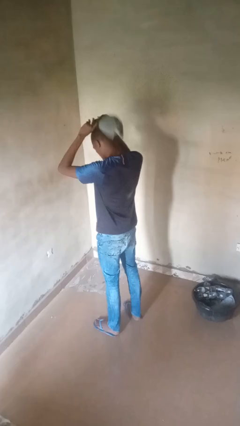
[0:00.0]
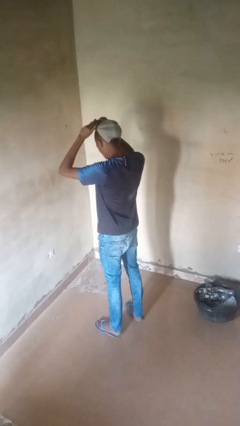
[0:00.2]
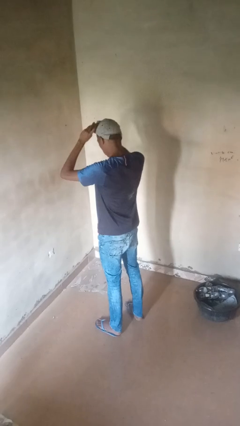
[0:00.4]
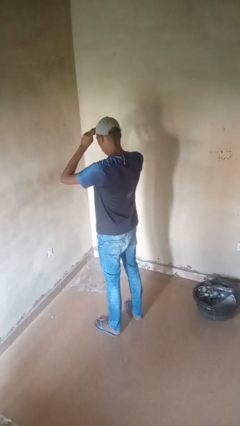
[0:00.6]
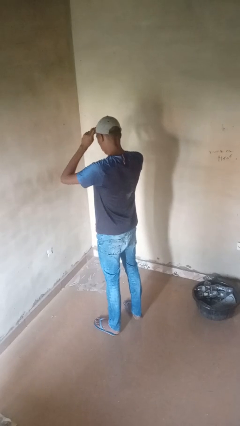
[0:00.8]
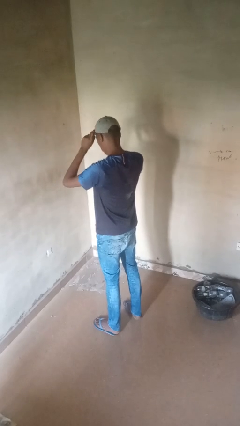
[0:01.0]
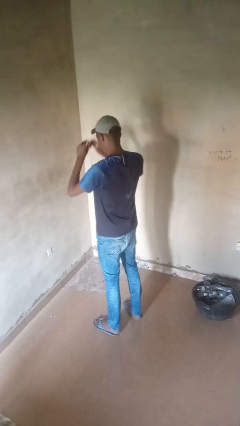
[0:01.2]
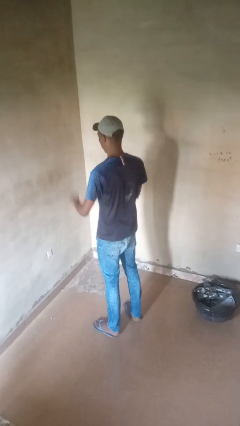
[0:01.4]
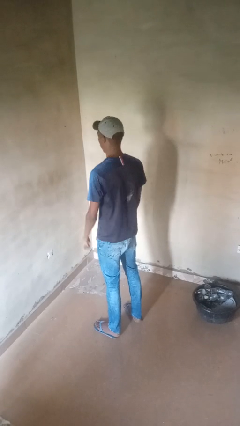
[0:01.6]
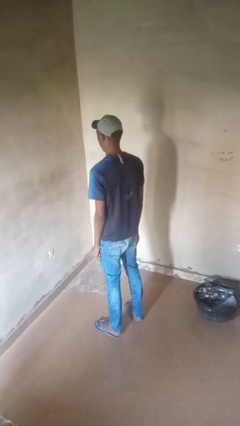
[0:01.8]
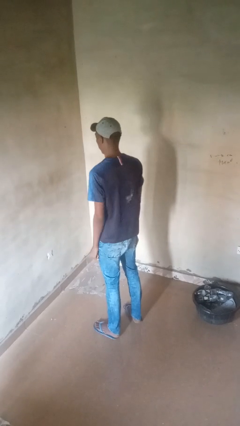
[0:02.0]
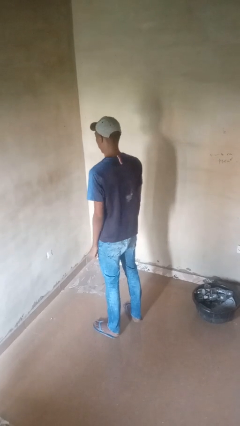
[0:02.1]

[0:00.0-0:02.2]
person puts on hat

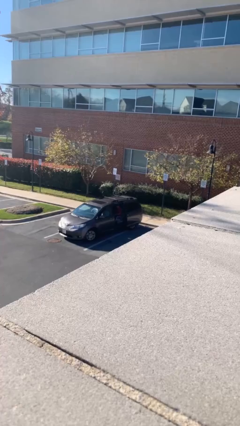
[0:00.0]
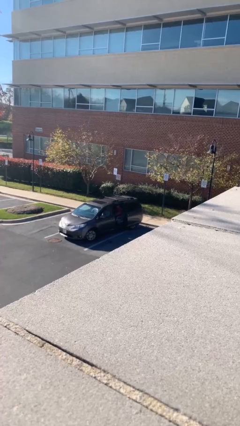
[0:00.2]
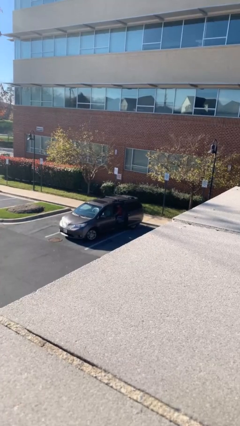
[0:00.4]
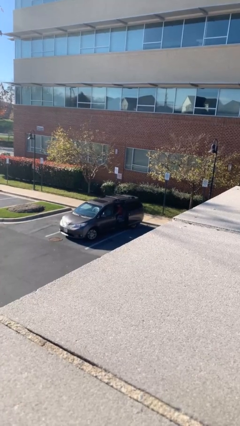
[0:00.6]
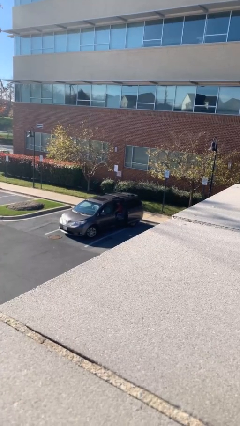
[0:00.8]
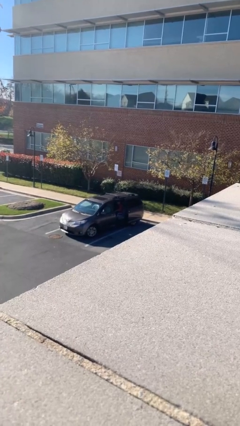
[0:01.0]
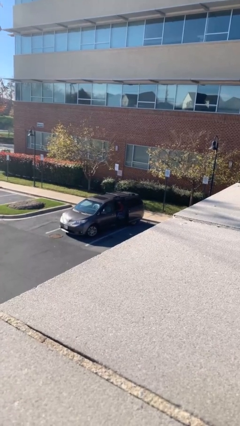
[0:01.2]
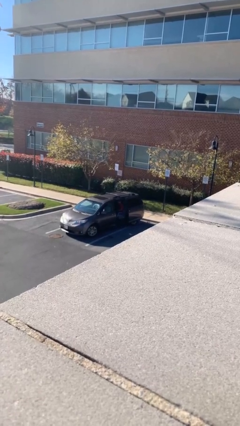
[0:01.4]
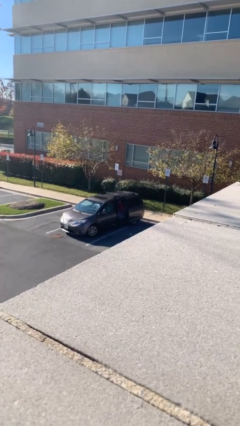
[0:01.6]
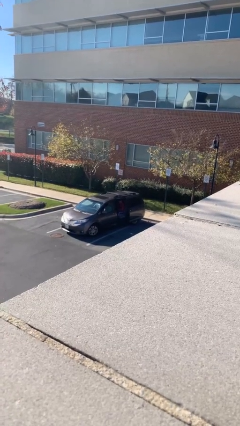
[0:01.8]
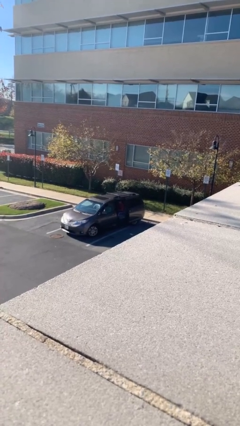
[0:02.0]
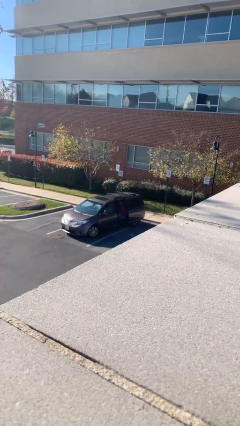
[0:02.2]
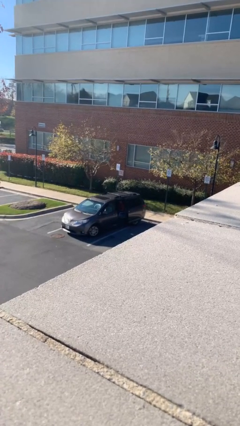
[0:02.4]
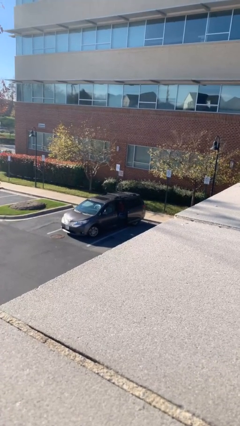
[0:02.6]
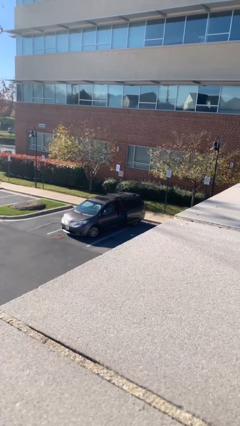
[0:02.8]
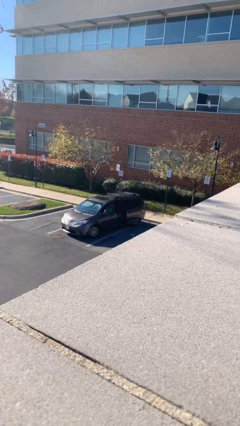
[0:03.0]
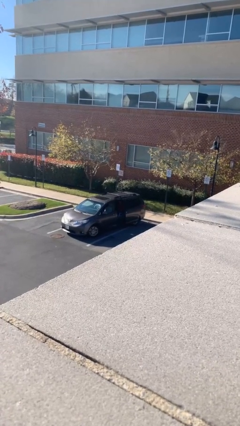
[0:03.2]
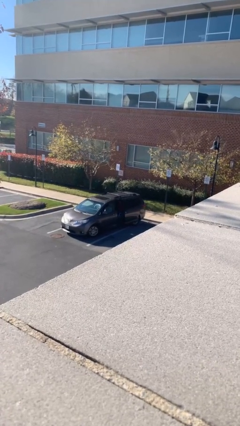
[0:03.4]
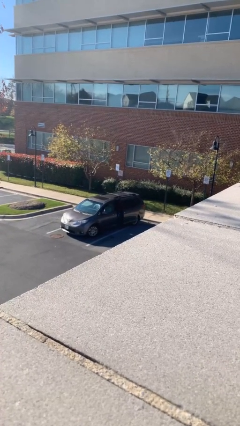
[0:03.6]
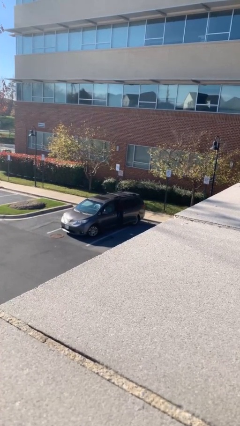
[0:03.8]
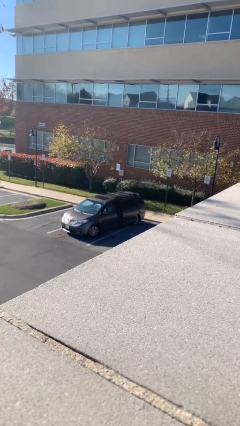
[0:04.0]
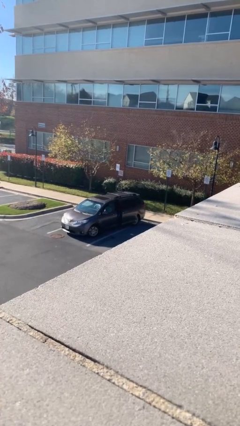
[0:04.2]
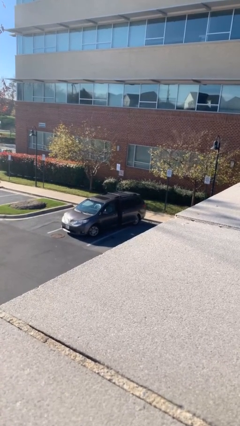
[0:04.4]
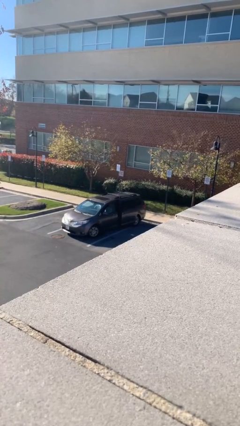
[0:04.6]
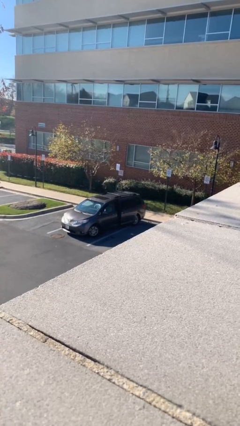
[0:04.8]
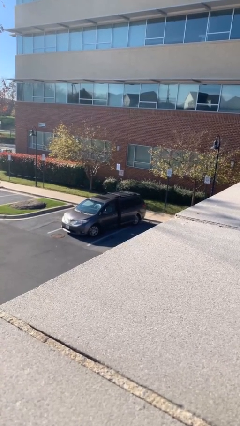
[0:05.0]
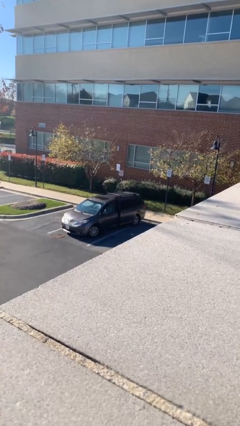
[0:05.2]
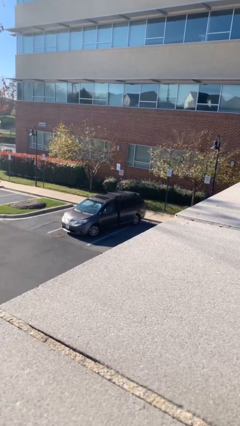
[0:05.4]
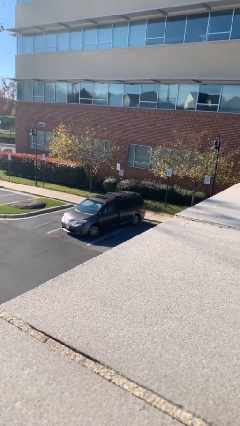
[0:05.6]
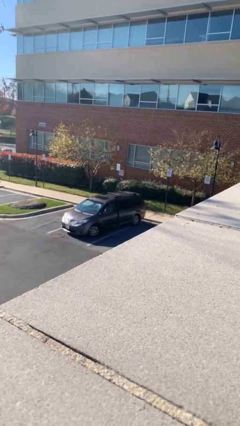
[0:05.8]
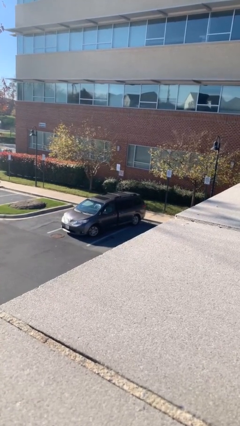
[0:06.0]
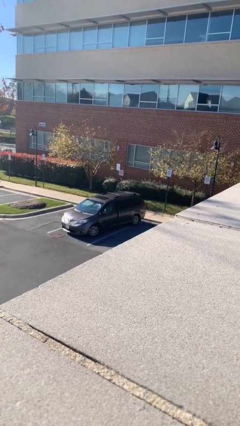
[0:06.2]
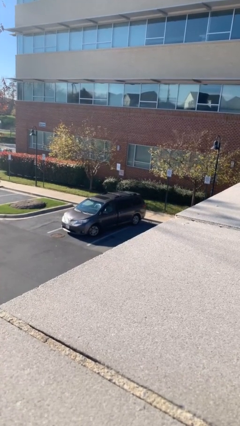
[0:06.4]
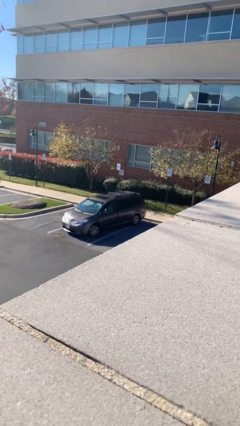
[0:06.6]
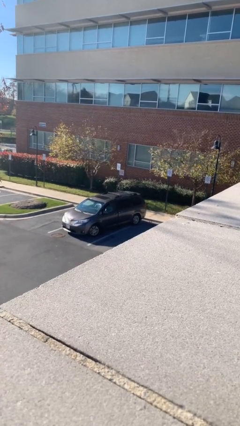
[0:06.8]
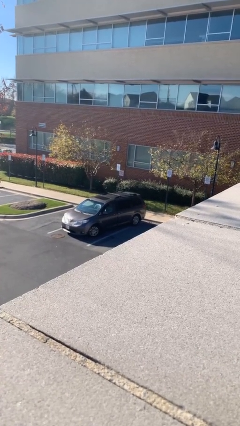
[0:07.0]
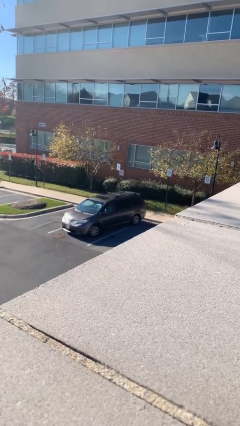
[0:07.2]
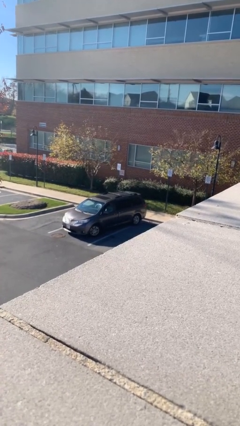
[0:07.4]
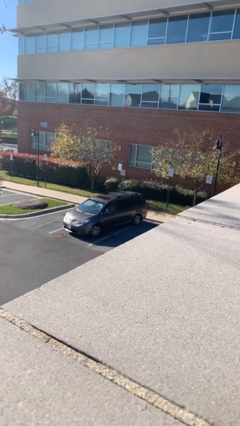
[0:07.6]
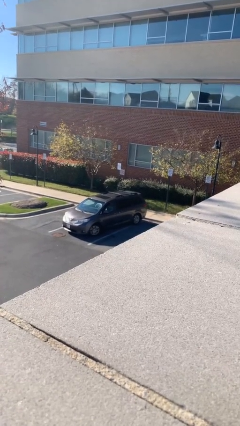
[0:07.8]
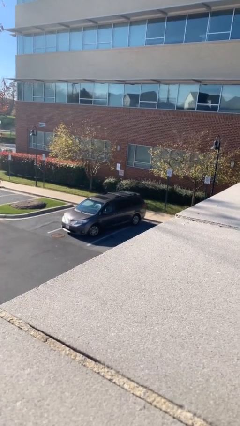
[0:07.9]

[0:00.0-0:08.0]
person closes car door

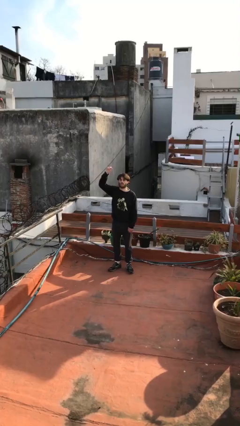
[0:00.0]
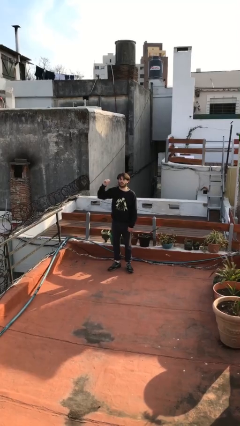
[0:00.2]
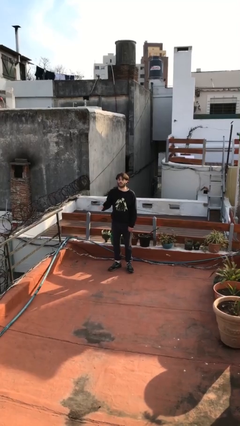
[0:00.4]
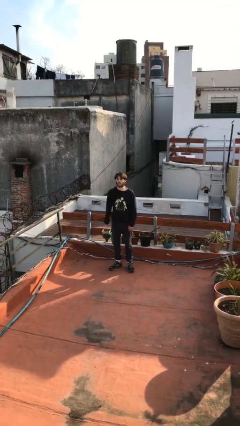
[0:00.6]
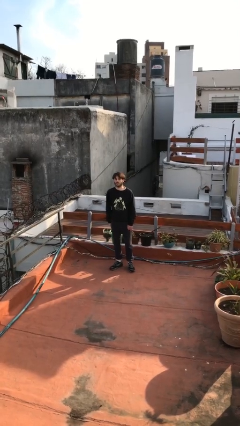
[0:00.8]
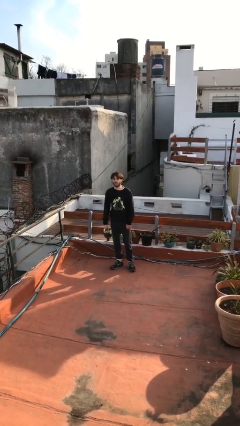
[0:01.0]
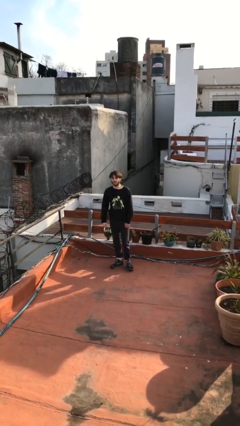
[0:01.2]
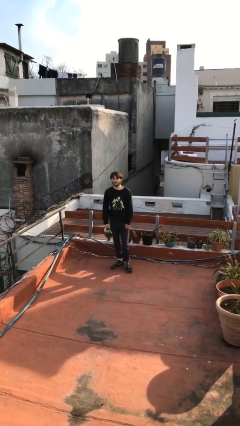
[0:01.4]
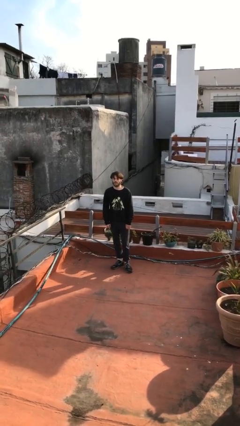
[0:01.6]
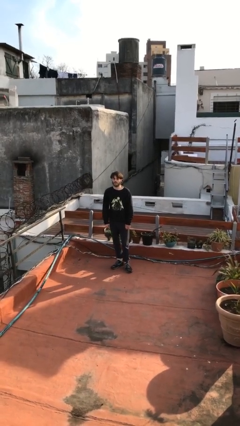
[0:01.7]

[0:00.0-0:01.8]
person gestures lower hand

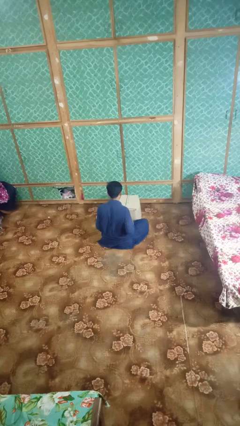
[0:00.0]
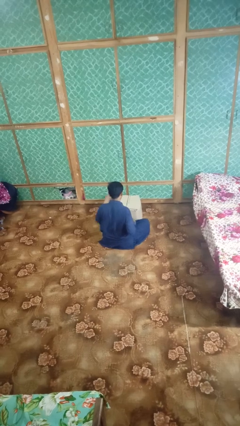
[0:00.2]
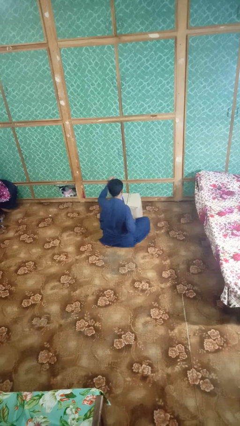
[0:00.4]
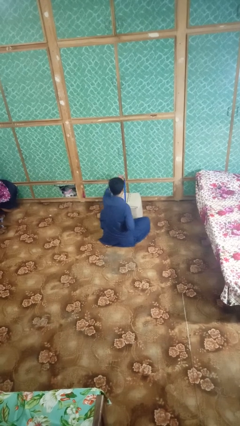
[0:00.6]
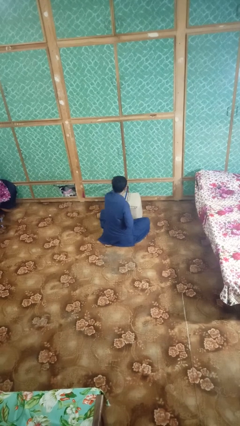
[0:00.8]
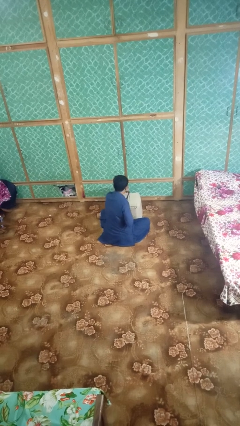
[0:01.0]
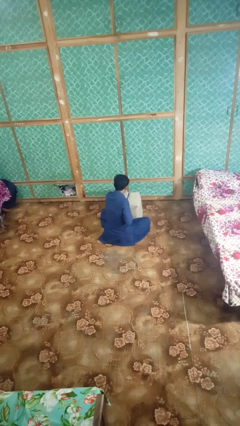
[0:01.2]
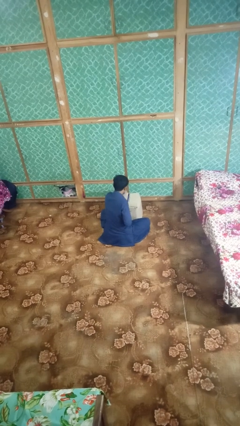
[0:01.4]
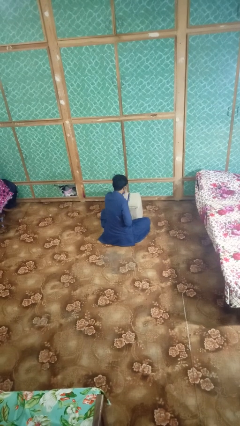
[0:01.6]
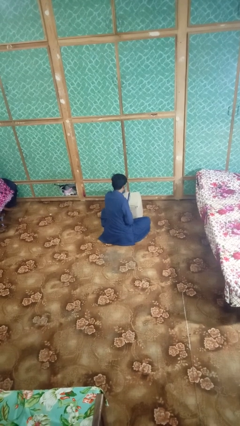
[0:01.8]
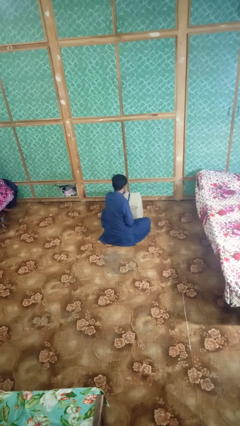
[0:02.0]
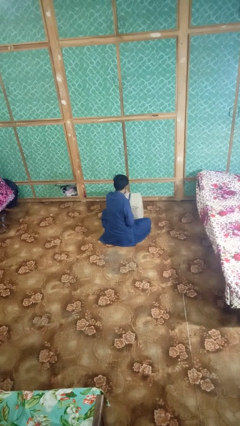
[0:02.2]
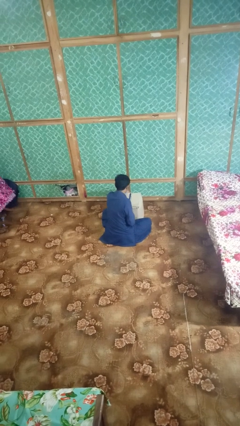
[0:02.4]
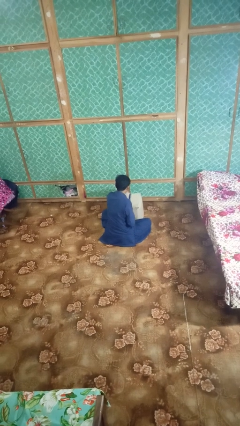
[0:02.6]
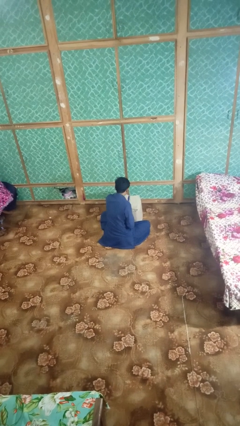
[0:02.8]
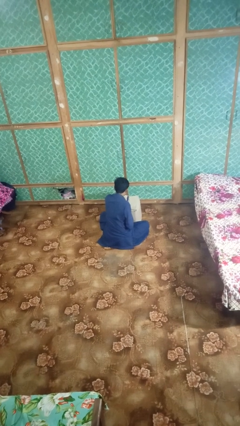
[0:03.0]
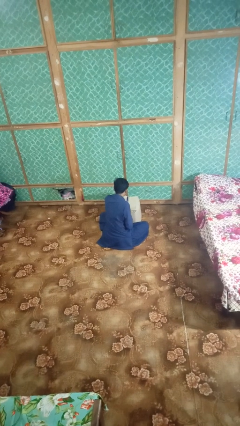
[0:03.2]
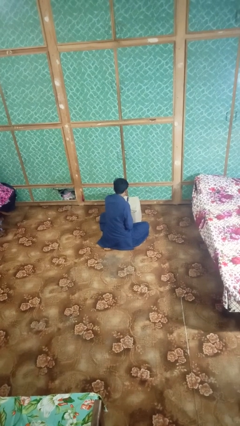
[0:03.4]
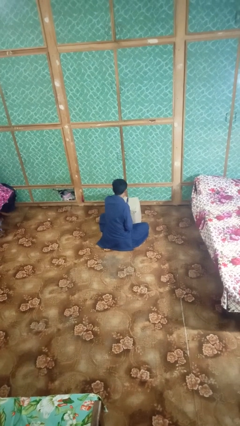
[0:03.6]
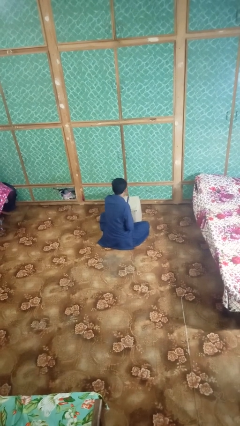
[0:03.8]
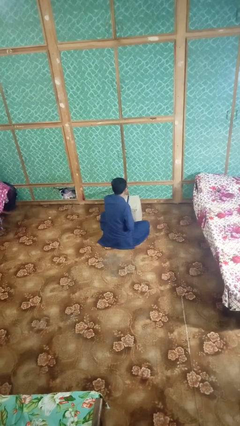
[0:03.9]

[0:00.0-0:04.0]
person wraps box

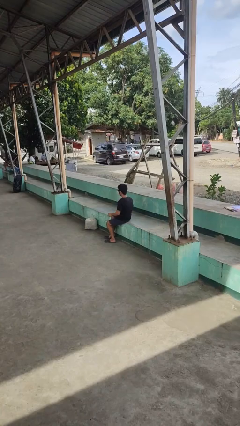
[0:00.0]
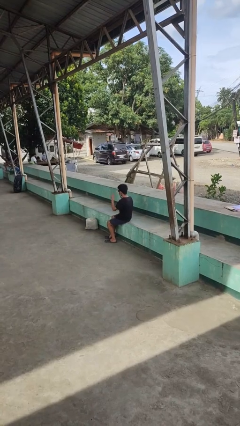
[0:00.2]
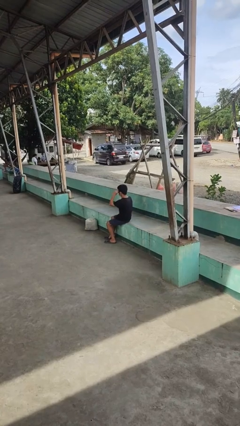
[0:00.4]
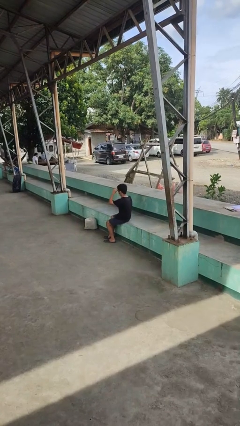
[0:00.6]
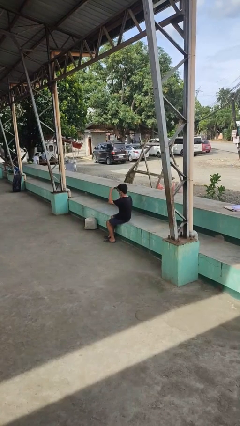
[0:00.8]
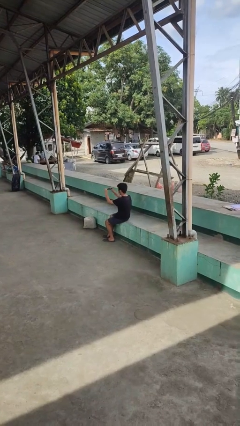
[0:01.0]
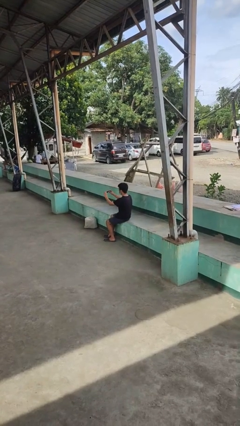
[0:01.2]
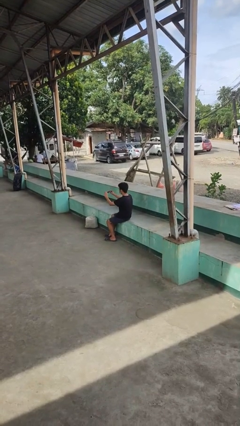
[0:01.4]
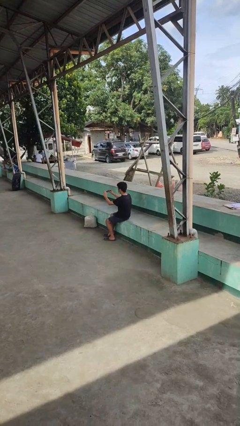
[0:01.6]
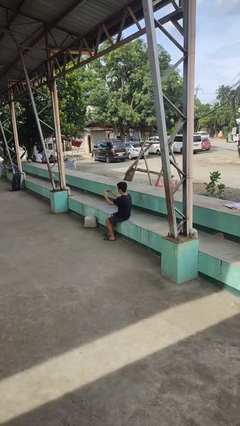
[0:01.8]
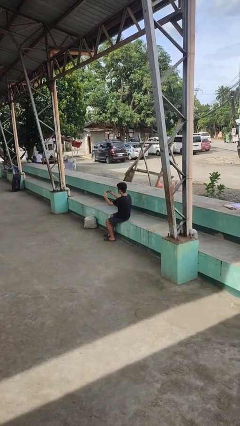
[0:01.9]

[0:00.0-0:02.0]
person takes off sunglasses
